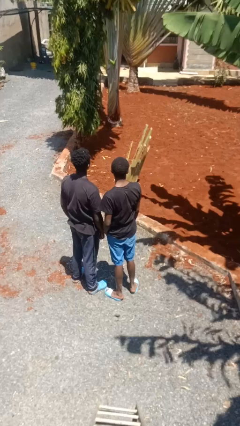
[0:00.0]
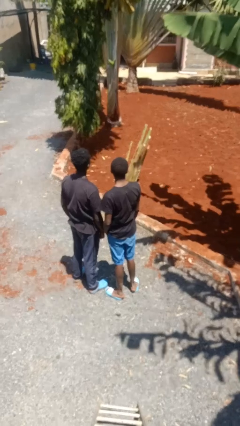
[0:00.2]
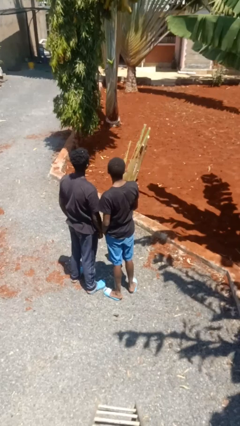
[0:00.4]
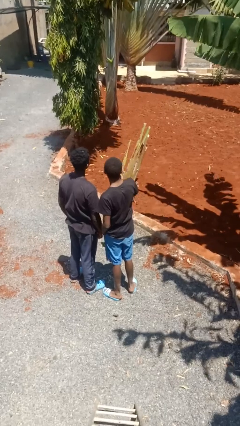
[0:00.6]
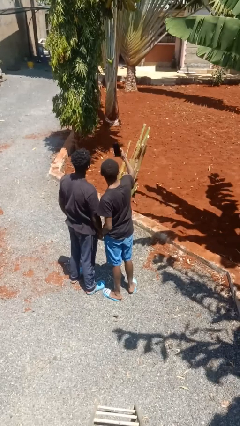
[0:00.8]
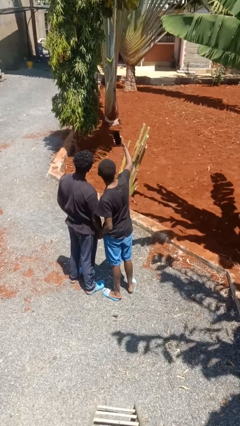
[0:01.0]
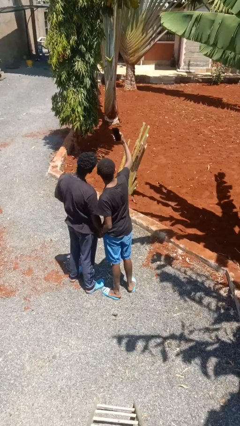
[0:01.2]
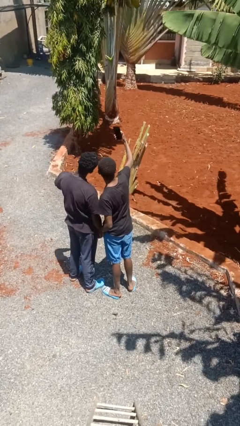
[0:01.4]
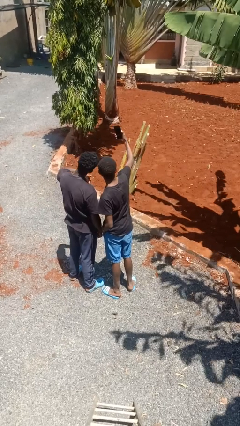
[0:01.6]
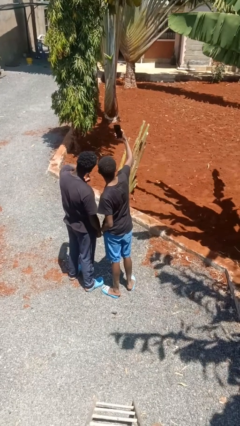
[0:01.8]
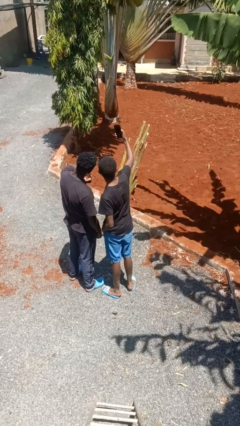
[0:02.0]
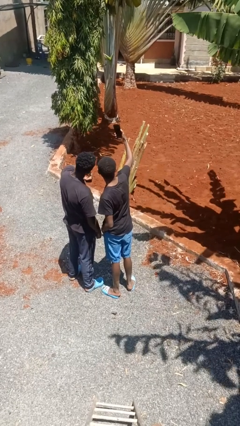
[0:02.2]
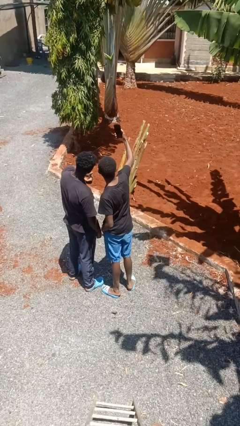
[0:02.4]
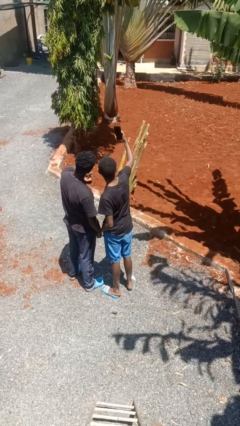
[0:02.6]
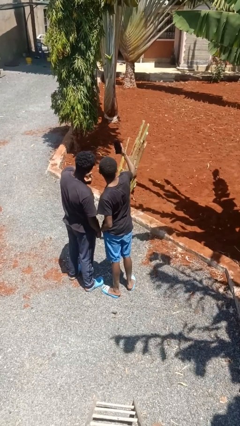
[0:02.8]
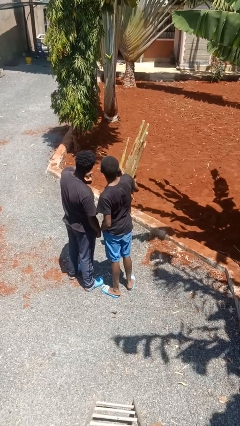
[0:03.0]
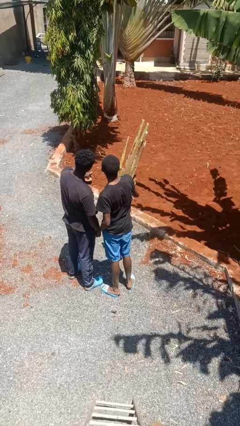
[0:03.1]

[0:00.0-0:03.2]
person takes selfie with person

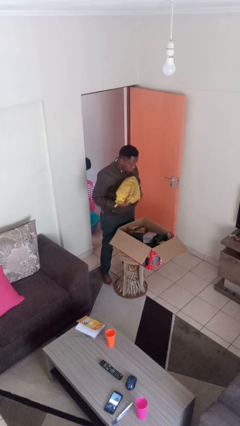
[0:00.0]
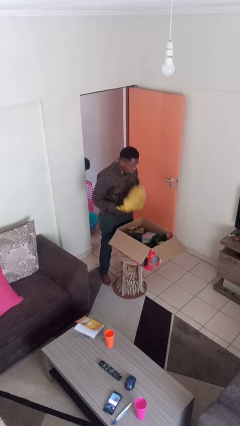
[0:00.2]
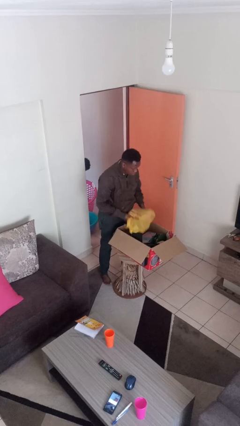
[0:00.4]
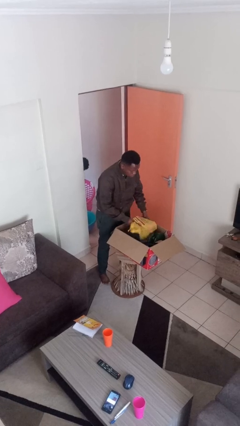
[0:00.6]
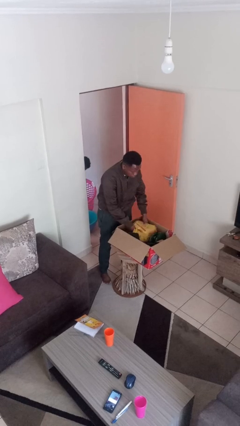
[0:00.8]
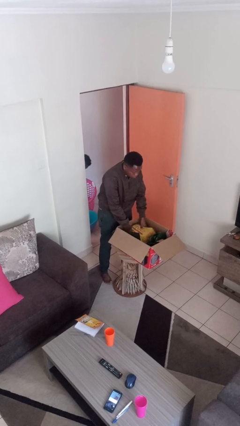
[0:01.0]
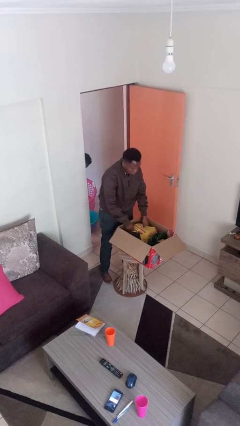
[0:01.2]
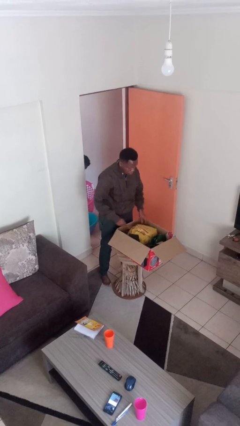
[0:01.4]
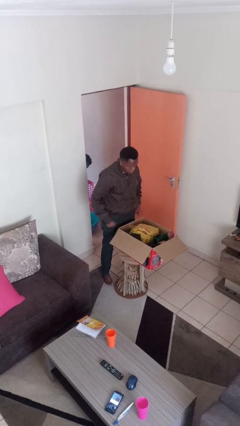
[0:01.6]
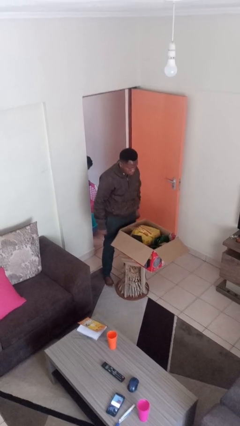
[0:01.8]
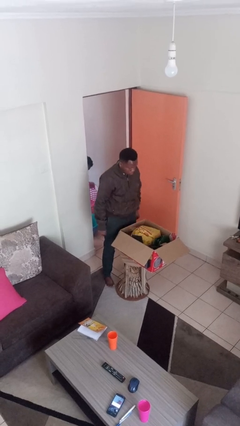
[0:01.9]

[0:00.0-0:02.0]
person puts object into box

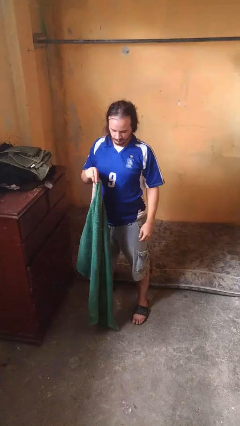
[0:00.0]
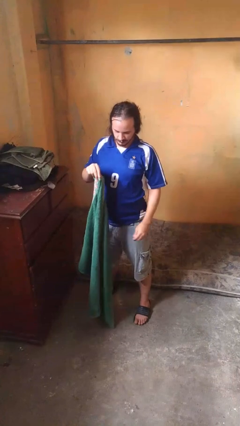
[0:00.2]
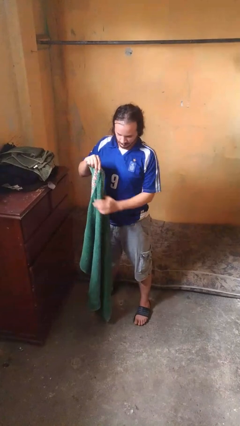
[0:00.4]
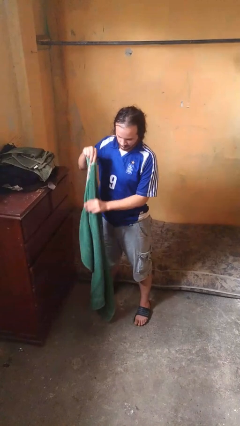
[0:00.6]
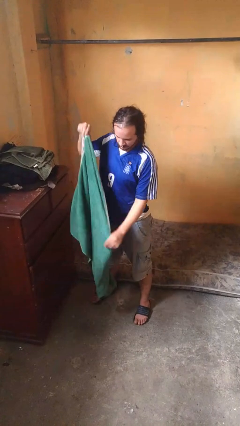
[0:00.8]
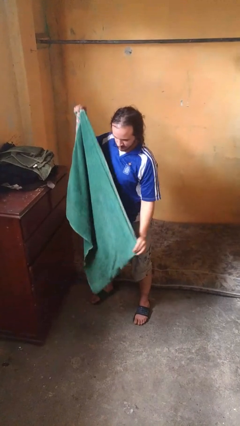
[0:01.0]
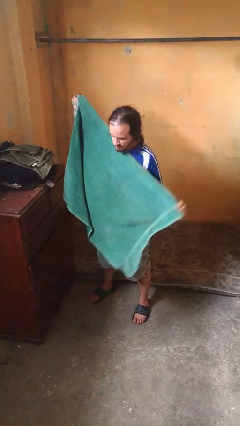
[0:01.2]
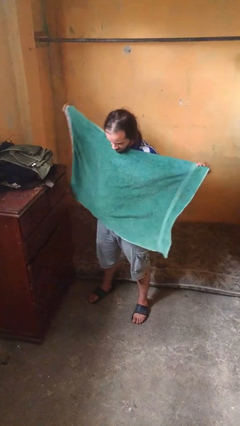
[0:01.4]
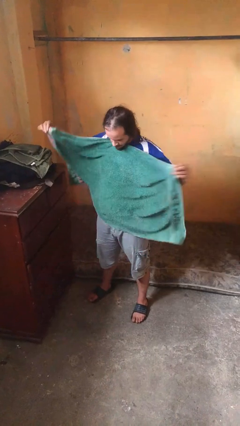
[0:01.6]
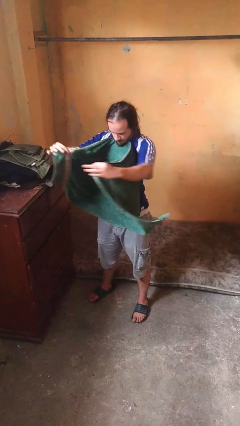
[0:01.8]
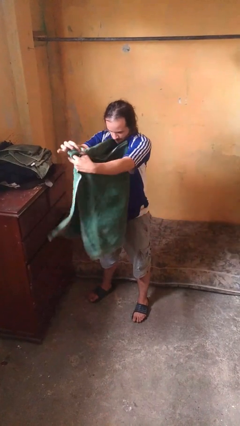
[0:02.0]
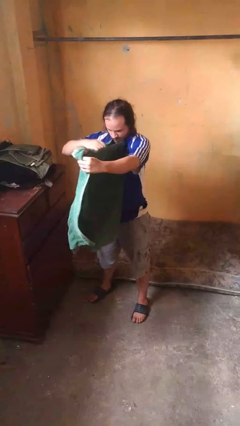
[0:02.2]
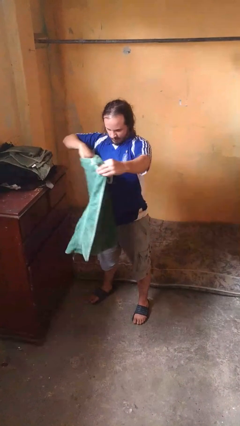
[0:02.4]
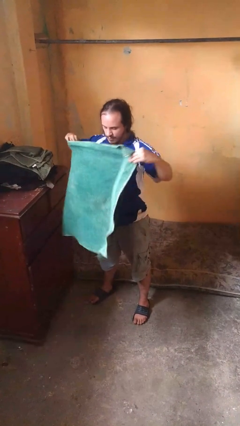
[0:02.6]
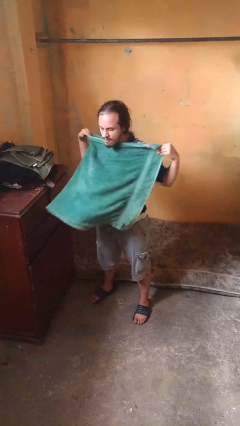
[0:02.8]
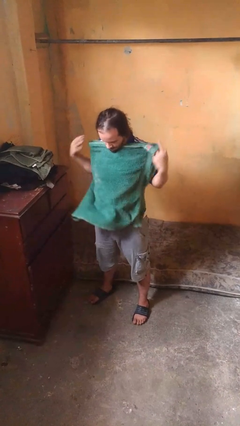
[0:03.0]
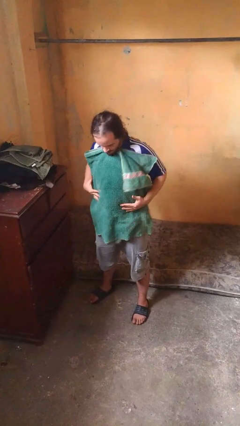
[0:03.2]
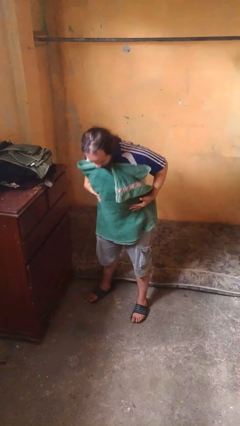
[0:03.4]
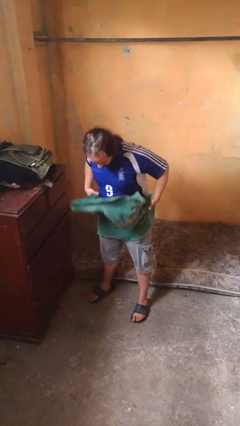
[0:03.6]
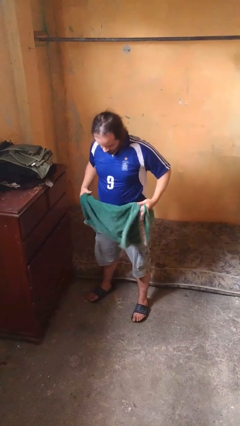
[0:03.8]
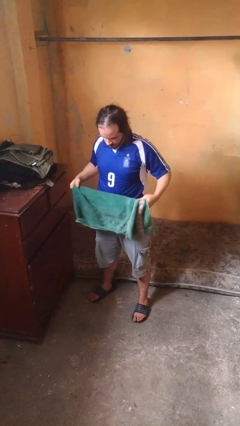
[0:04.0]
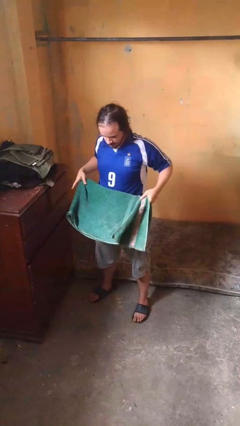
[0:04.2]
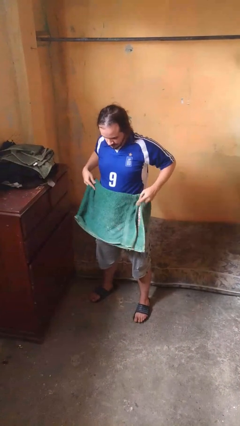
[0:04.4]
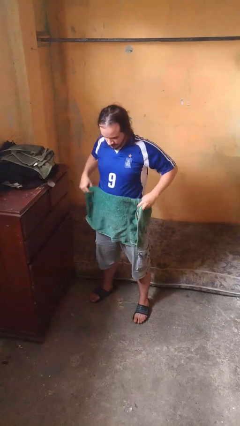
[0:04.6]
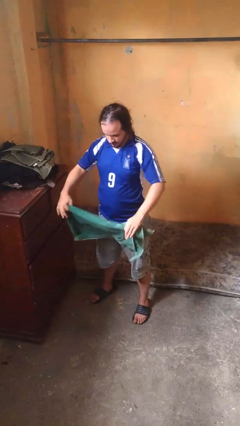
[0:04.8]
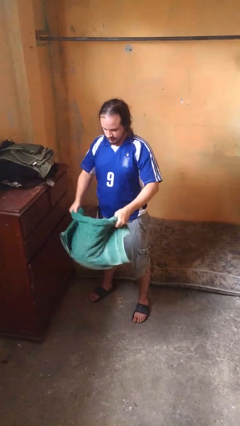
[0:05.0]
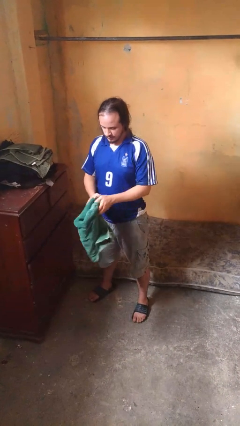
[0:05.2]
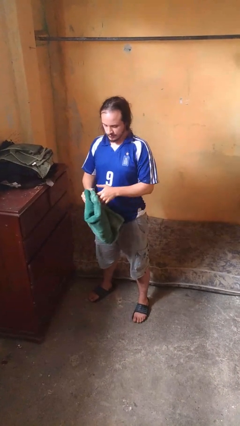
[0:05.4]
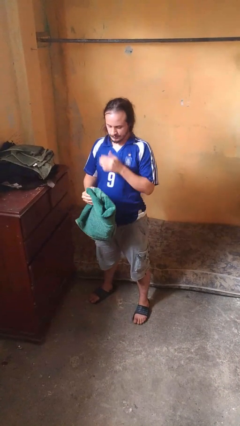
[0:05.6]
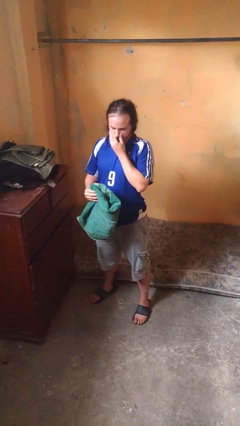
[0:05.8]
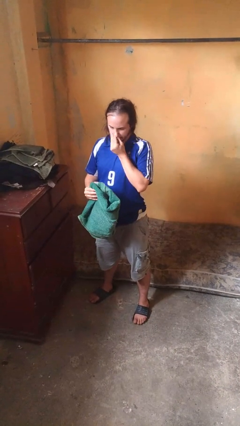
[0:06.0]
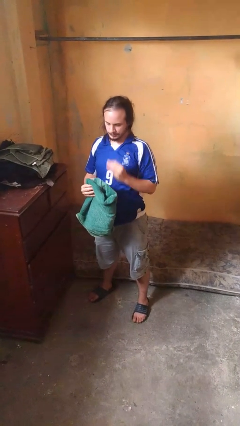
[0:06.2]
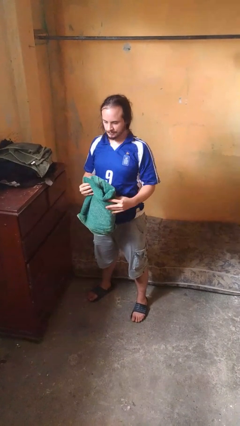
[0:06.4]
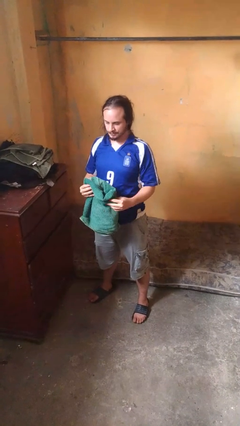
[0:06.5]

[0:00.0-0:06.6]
person folds blanket

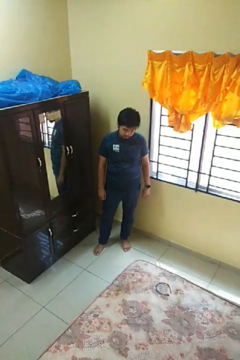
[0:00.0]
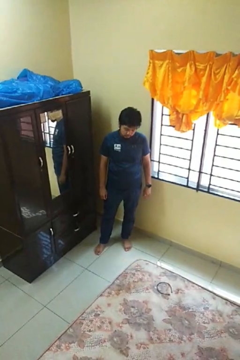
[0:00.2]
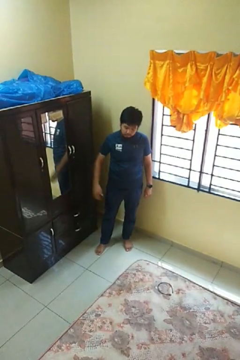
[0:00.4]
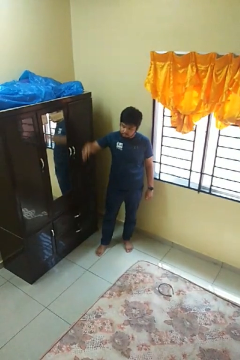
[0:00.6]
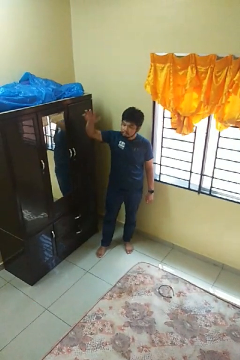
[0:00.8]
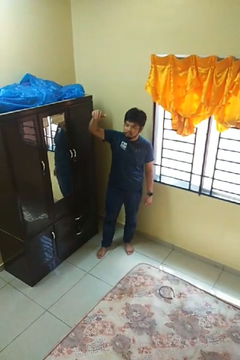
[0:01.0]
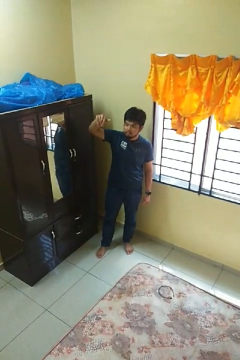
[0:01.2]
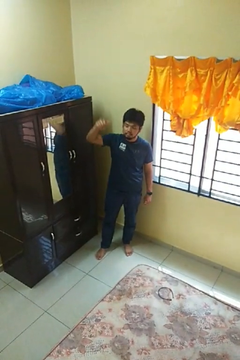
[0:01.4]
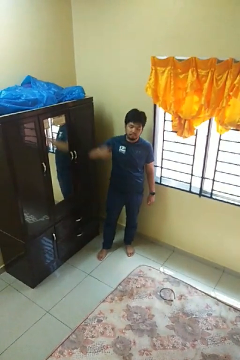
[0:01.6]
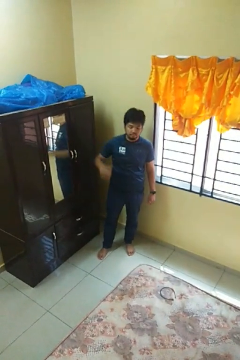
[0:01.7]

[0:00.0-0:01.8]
person gestures come here

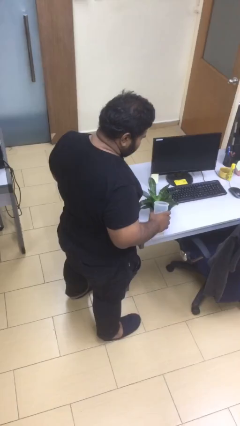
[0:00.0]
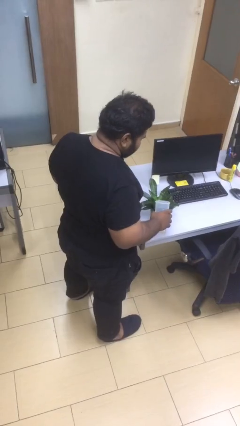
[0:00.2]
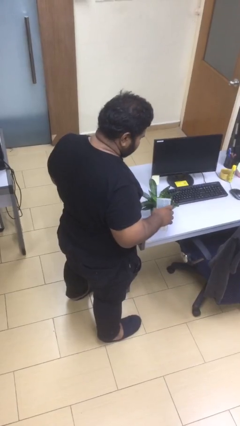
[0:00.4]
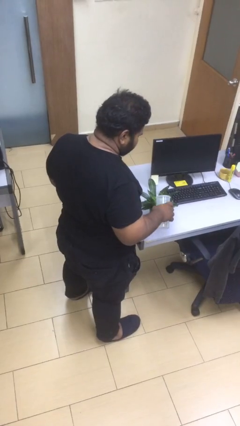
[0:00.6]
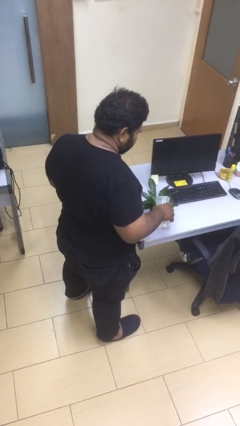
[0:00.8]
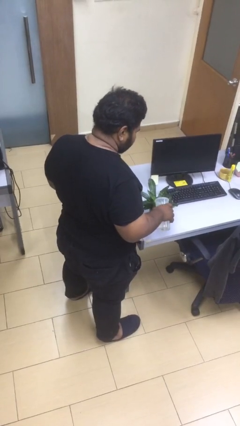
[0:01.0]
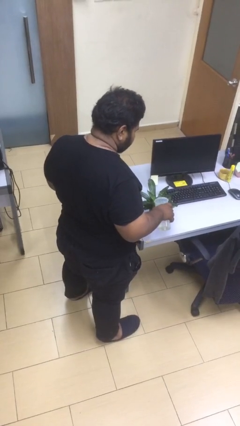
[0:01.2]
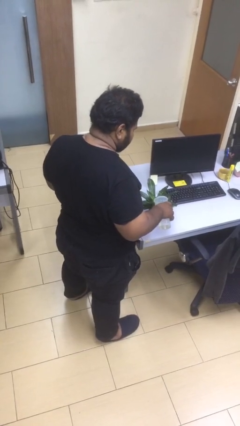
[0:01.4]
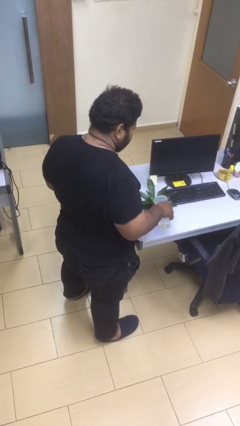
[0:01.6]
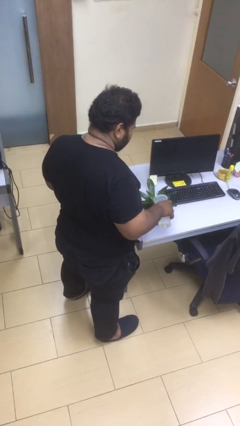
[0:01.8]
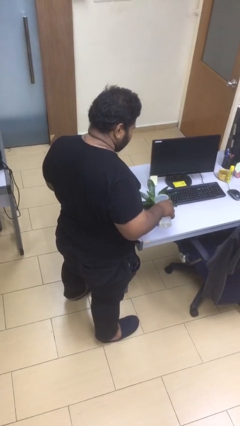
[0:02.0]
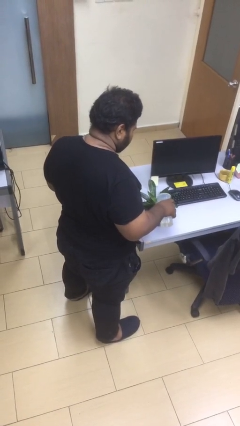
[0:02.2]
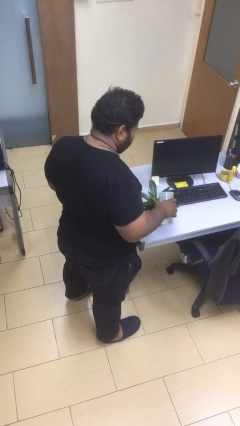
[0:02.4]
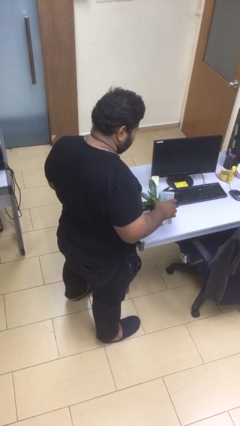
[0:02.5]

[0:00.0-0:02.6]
person waters houseplant

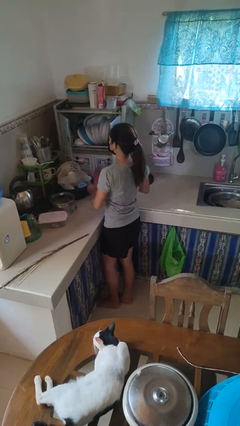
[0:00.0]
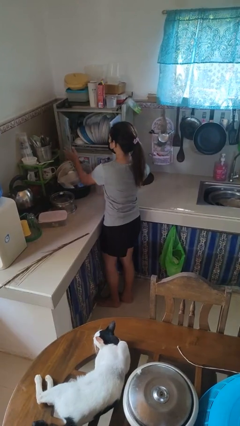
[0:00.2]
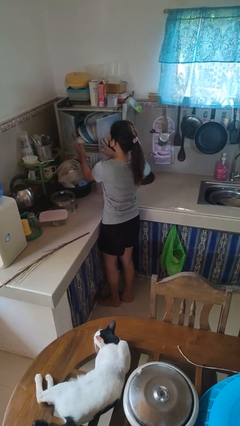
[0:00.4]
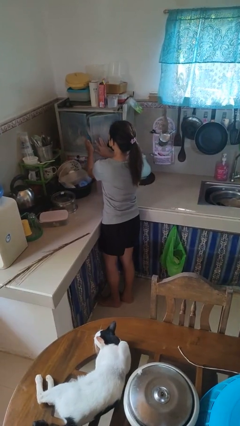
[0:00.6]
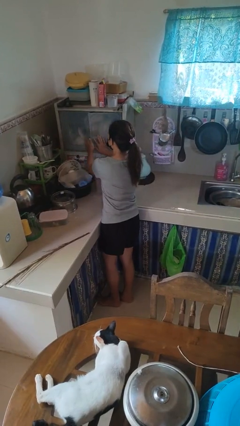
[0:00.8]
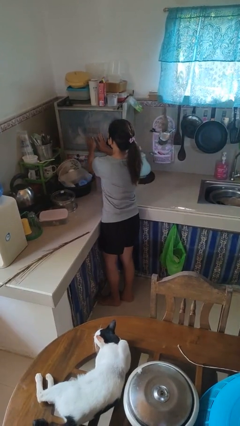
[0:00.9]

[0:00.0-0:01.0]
person closes kitchen drawer

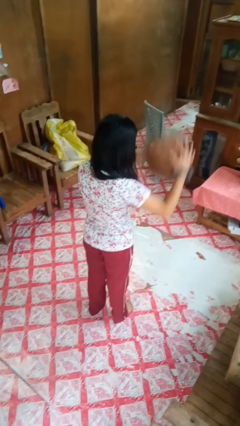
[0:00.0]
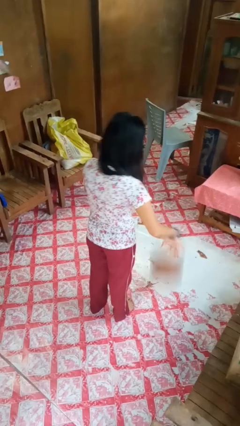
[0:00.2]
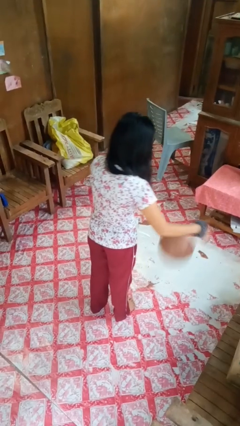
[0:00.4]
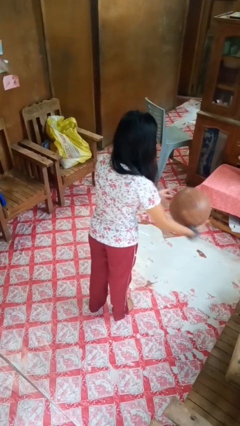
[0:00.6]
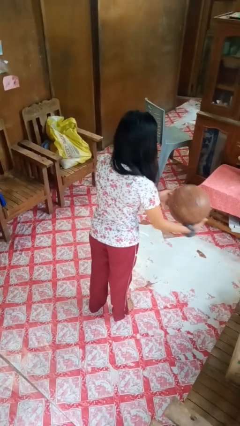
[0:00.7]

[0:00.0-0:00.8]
person bounces ball on floor
